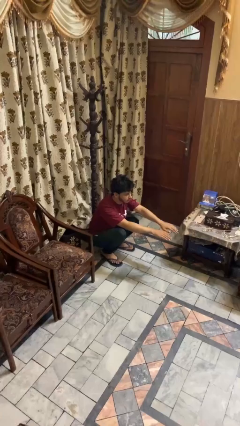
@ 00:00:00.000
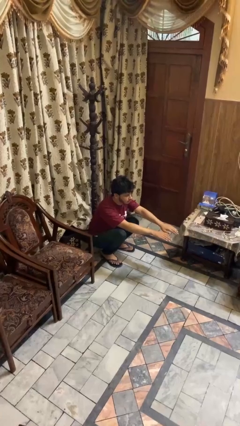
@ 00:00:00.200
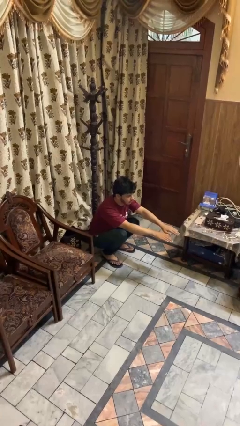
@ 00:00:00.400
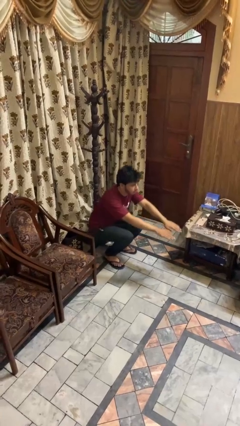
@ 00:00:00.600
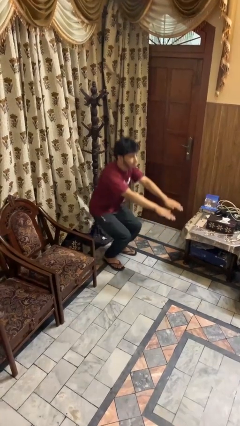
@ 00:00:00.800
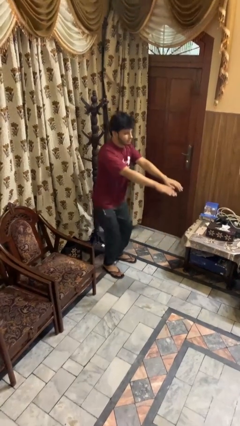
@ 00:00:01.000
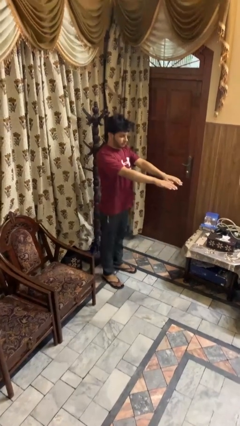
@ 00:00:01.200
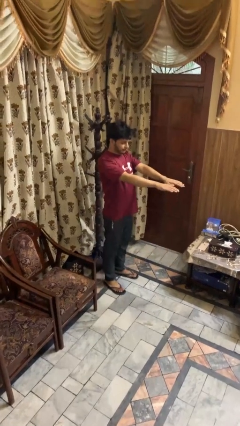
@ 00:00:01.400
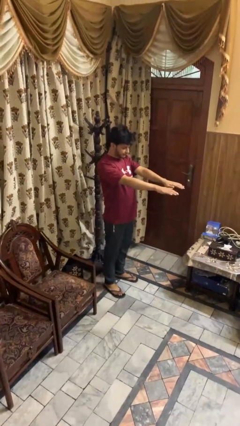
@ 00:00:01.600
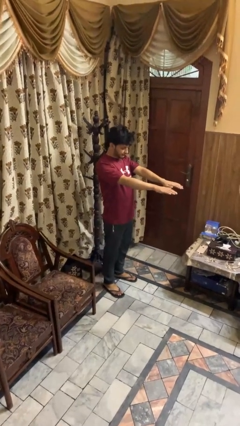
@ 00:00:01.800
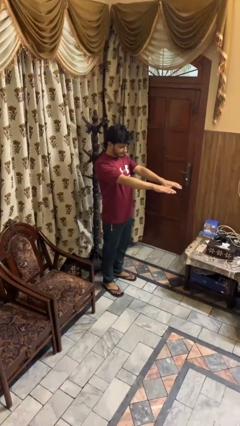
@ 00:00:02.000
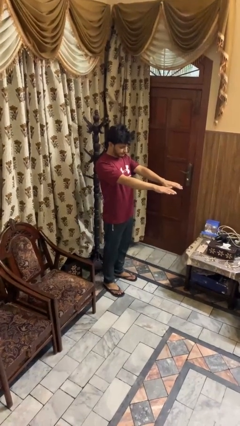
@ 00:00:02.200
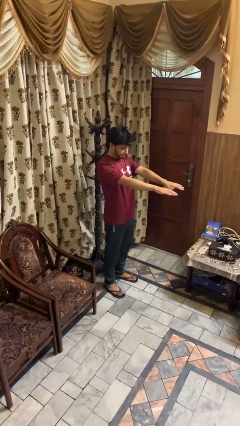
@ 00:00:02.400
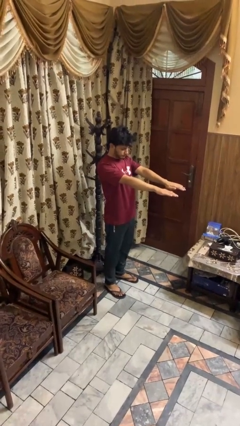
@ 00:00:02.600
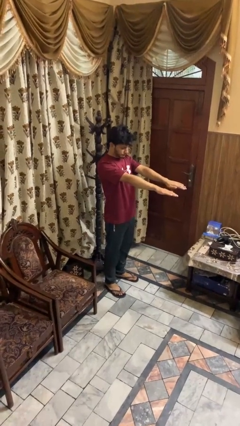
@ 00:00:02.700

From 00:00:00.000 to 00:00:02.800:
person stands up

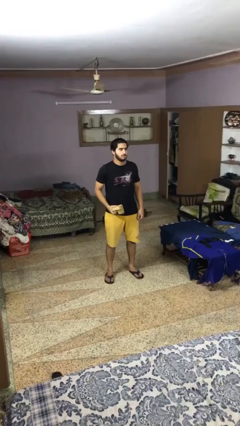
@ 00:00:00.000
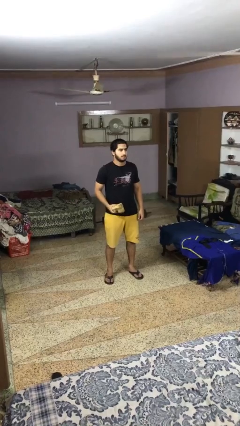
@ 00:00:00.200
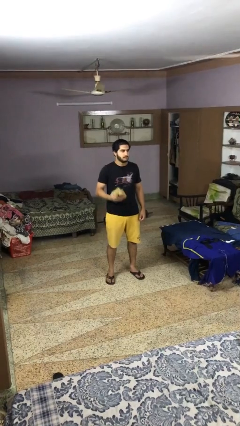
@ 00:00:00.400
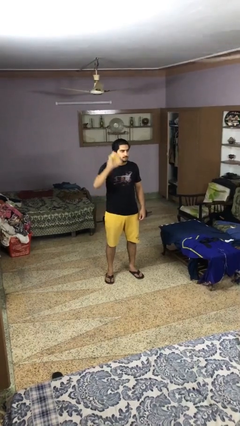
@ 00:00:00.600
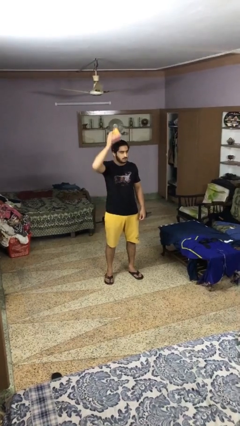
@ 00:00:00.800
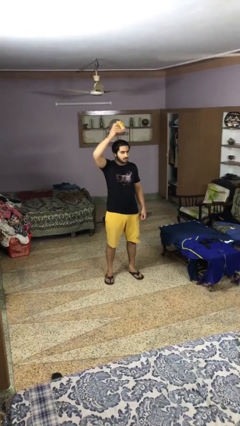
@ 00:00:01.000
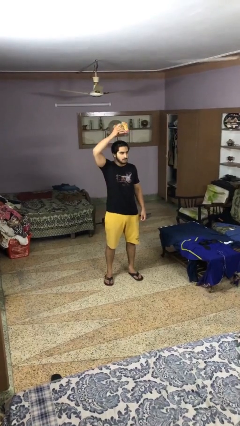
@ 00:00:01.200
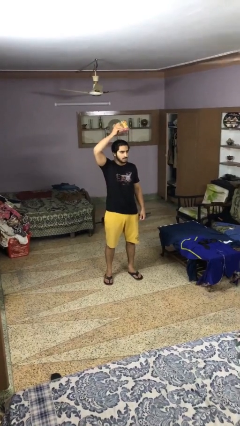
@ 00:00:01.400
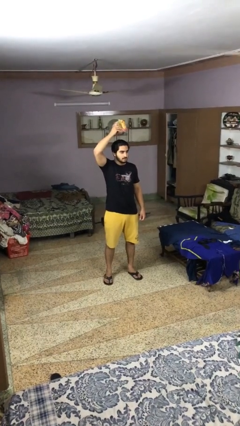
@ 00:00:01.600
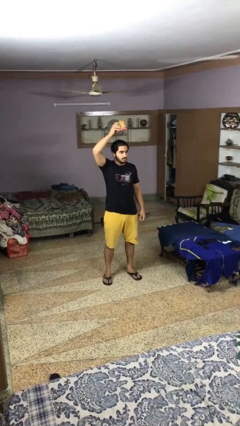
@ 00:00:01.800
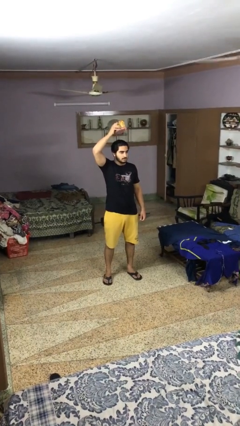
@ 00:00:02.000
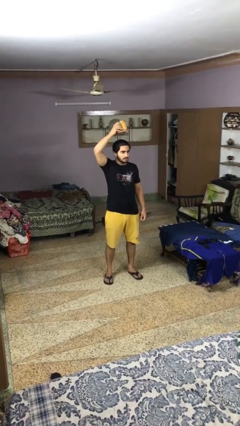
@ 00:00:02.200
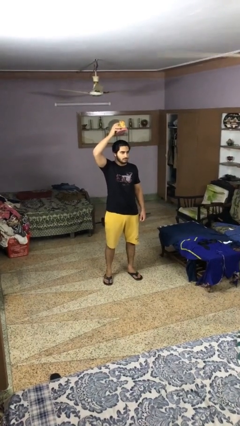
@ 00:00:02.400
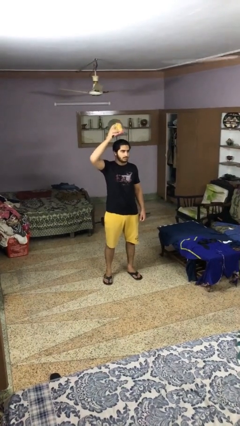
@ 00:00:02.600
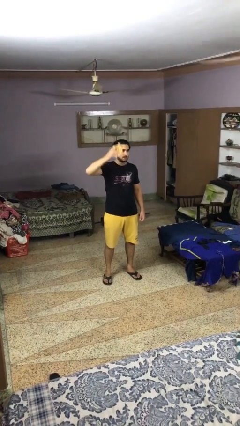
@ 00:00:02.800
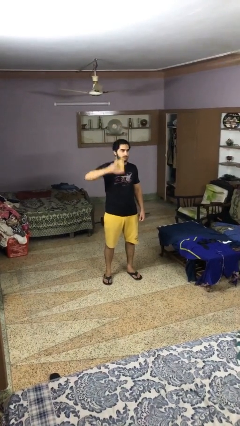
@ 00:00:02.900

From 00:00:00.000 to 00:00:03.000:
person holds object above head

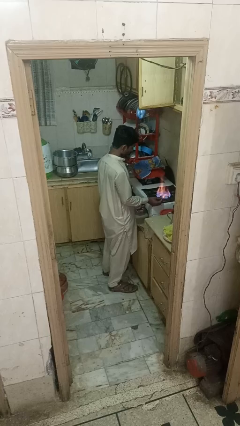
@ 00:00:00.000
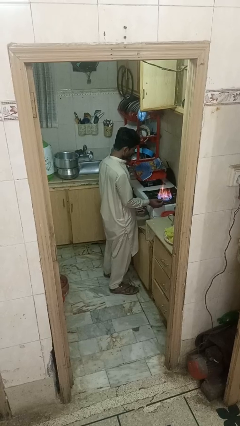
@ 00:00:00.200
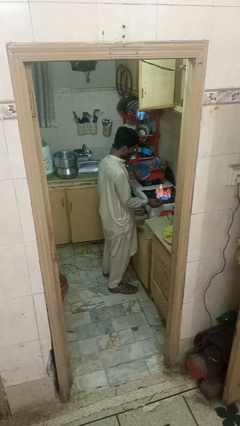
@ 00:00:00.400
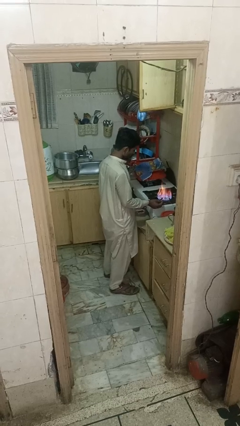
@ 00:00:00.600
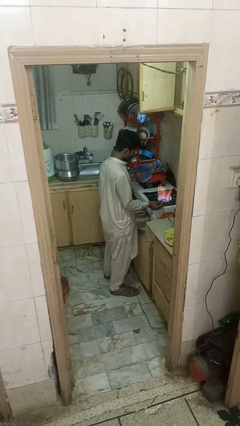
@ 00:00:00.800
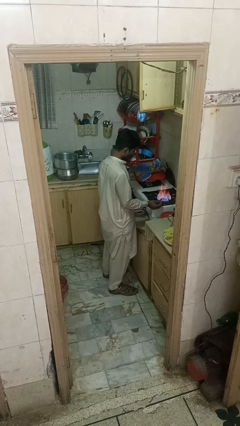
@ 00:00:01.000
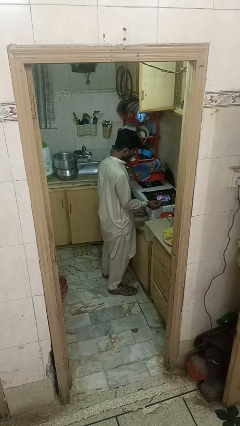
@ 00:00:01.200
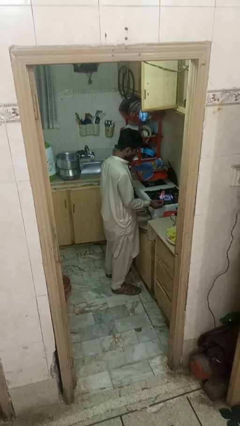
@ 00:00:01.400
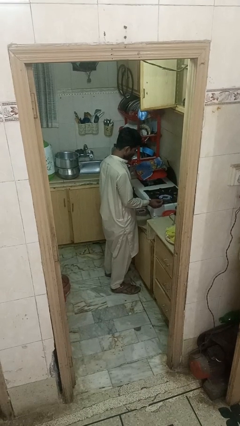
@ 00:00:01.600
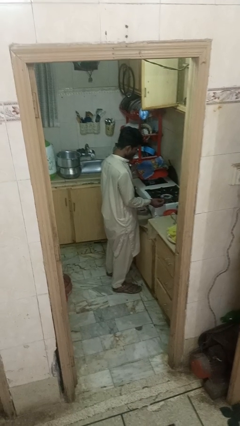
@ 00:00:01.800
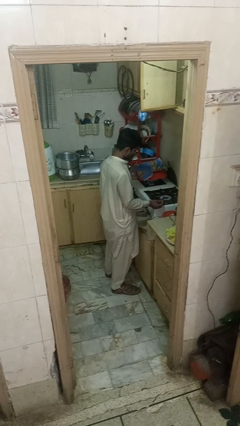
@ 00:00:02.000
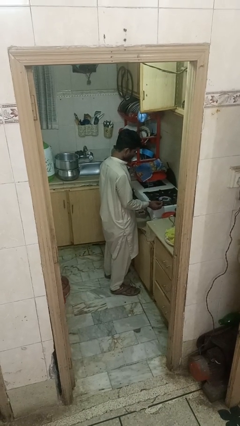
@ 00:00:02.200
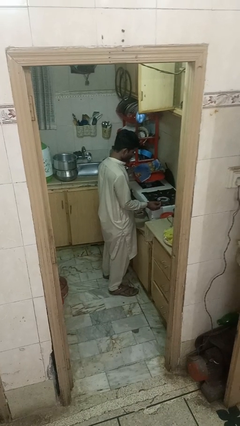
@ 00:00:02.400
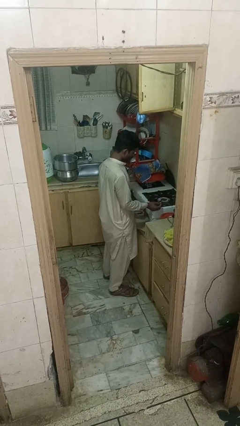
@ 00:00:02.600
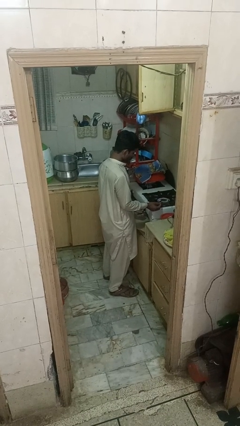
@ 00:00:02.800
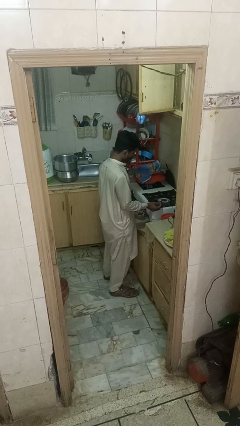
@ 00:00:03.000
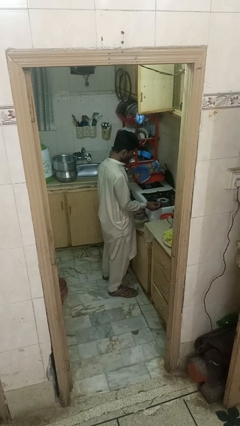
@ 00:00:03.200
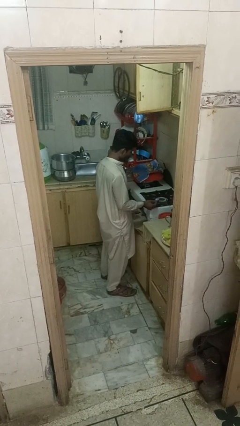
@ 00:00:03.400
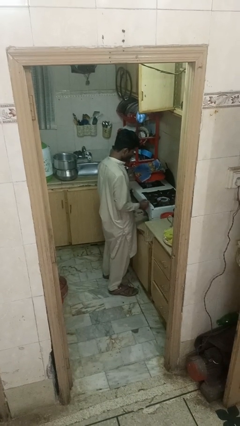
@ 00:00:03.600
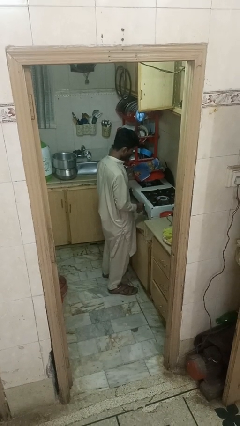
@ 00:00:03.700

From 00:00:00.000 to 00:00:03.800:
person turns off stovetop

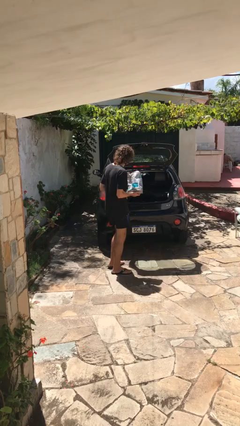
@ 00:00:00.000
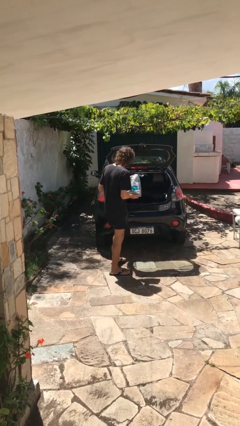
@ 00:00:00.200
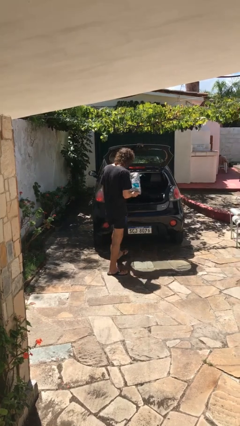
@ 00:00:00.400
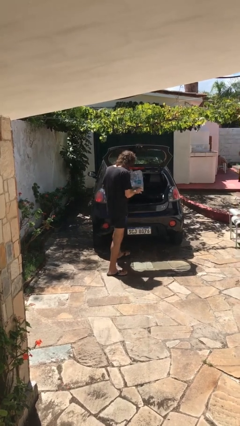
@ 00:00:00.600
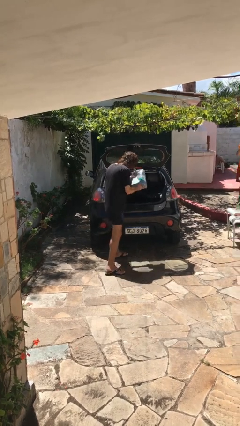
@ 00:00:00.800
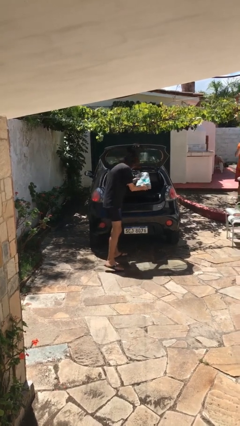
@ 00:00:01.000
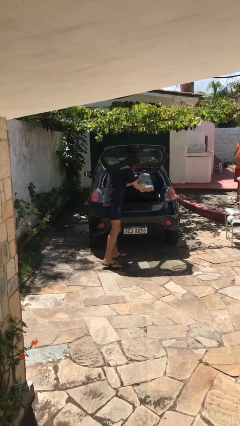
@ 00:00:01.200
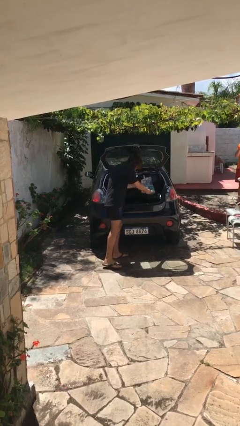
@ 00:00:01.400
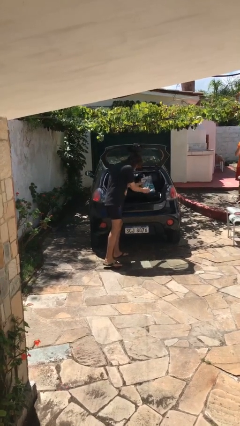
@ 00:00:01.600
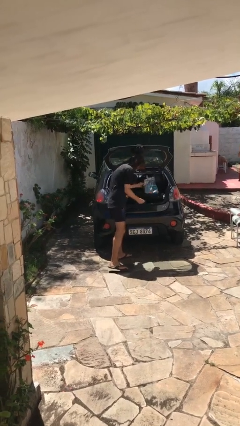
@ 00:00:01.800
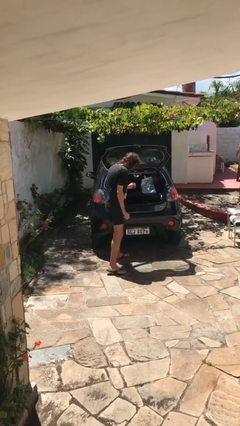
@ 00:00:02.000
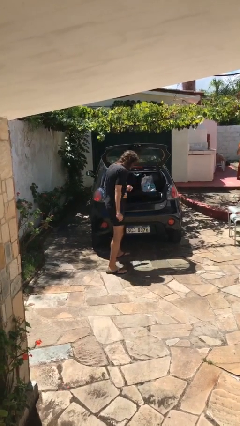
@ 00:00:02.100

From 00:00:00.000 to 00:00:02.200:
person loads car

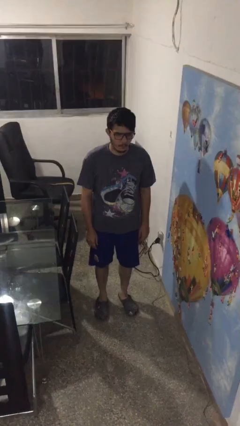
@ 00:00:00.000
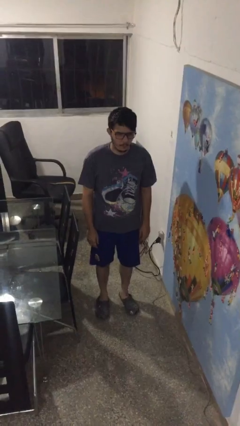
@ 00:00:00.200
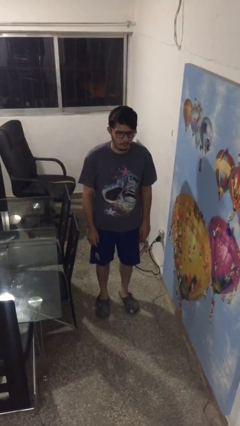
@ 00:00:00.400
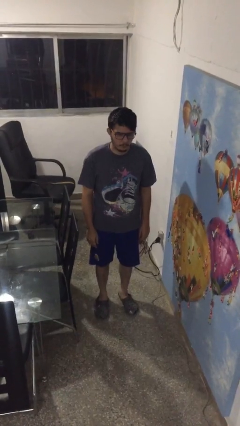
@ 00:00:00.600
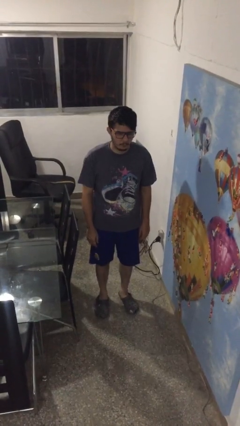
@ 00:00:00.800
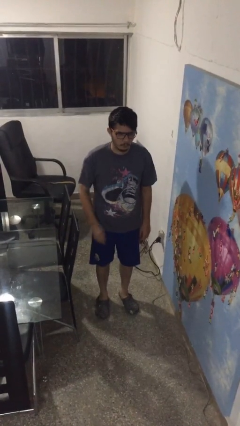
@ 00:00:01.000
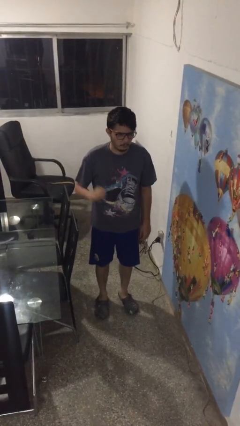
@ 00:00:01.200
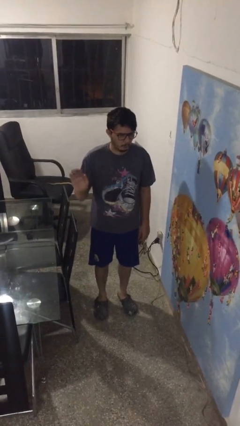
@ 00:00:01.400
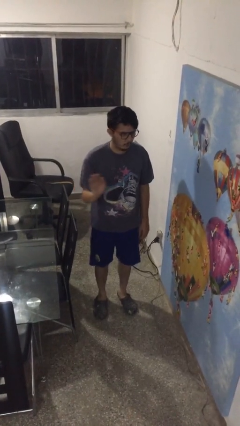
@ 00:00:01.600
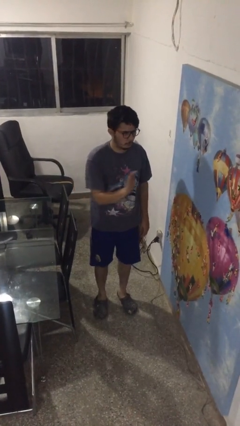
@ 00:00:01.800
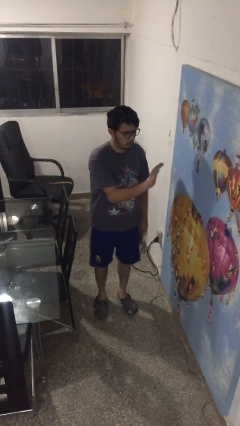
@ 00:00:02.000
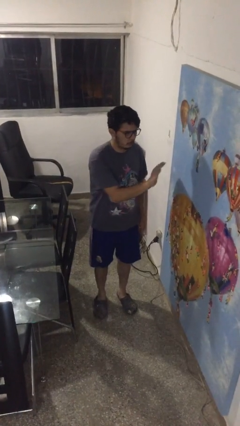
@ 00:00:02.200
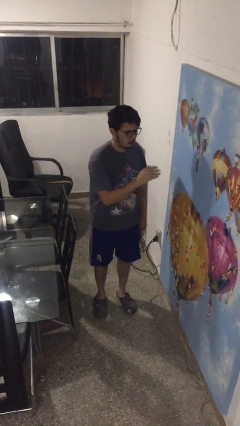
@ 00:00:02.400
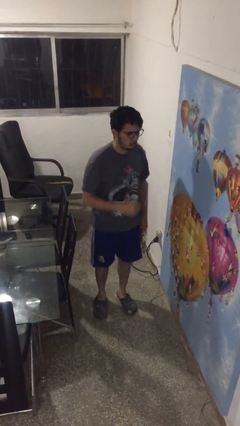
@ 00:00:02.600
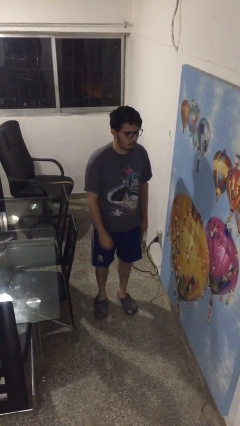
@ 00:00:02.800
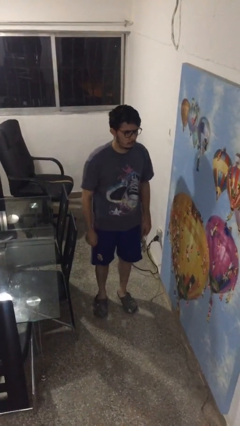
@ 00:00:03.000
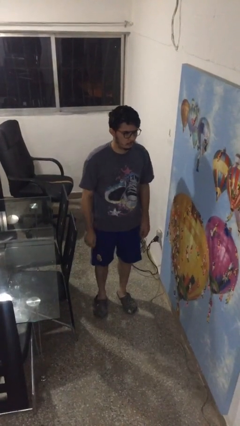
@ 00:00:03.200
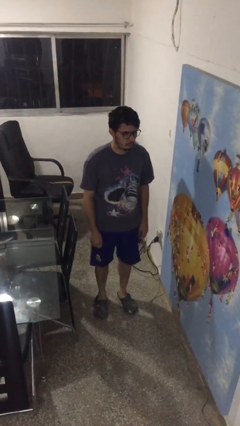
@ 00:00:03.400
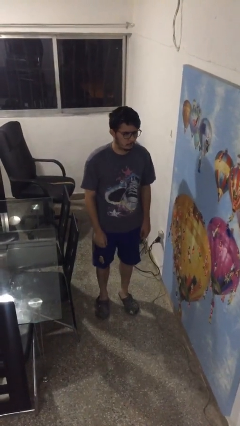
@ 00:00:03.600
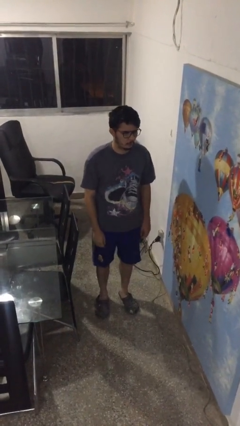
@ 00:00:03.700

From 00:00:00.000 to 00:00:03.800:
person gestures swipe left

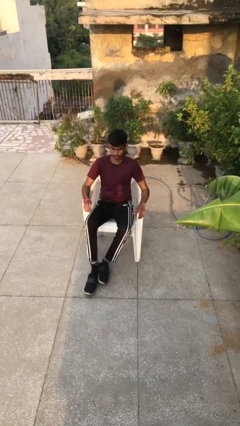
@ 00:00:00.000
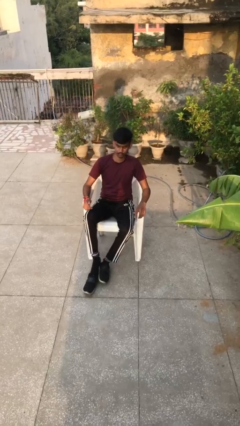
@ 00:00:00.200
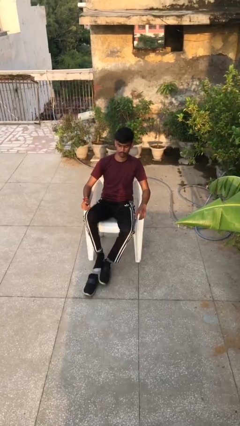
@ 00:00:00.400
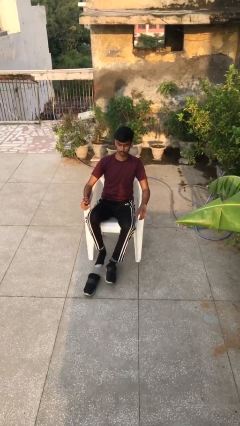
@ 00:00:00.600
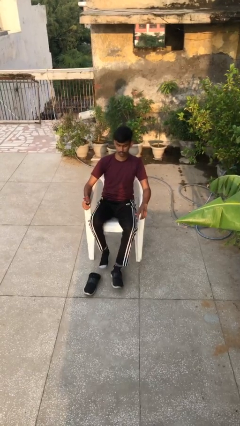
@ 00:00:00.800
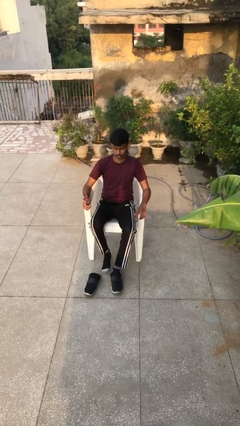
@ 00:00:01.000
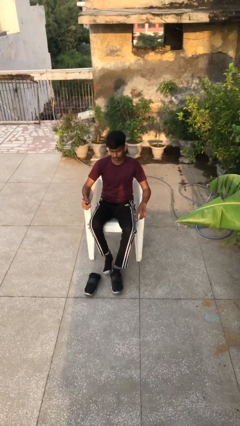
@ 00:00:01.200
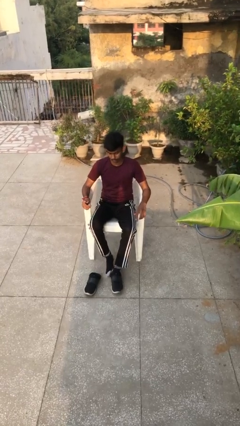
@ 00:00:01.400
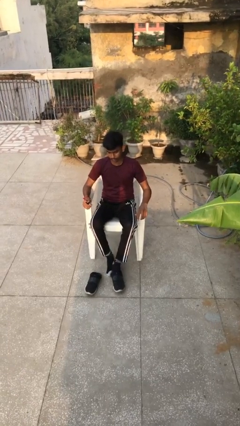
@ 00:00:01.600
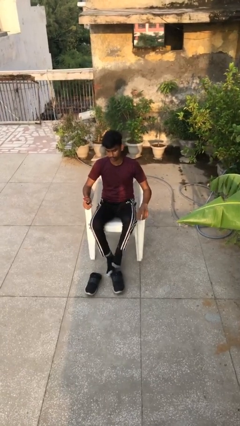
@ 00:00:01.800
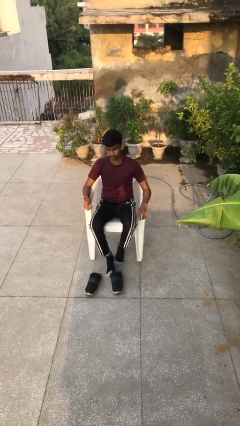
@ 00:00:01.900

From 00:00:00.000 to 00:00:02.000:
person takes off shoes
